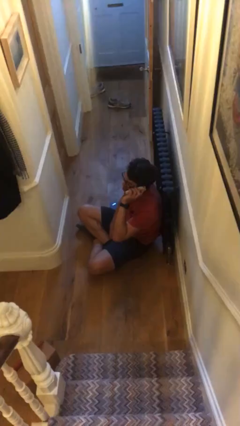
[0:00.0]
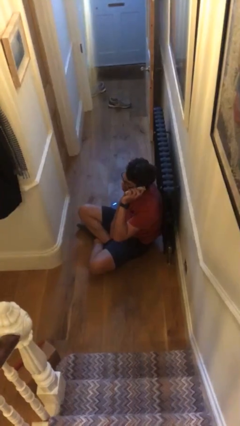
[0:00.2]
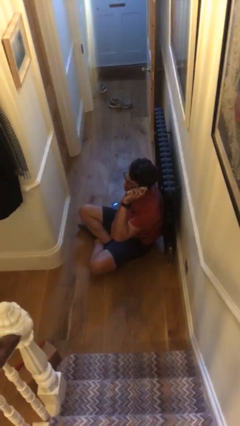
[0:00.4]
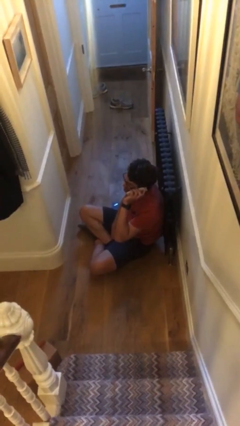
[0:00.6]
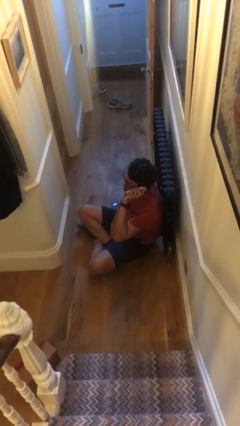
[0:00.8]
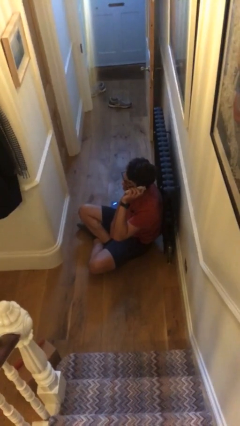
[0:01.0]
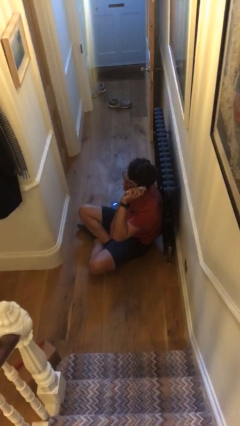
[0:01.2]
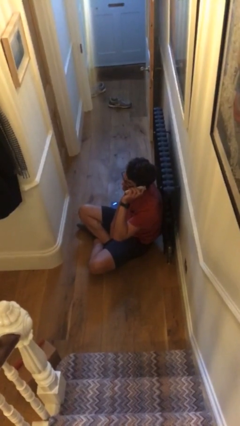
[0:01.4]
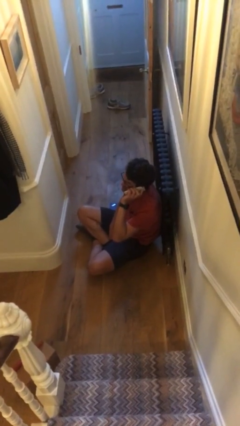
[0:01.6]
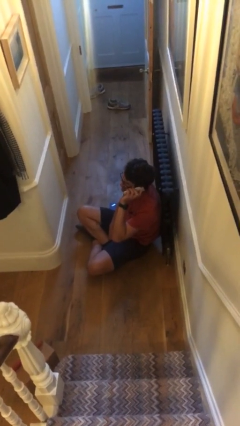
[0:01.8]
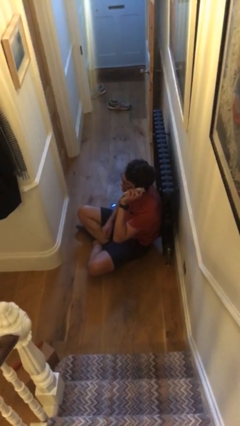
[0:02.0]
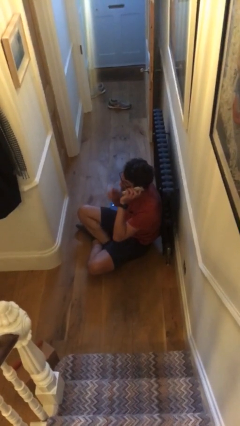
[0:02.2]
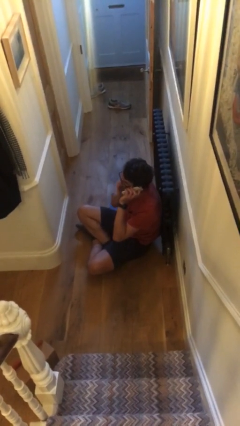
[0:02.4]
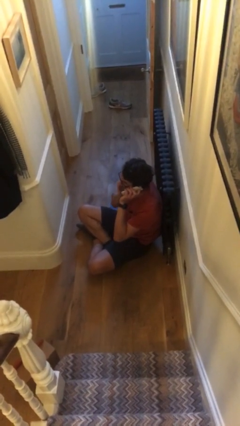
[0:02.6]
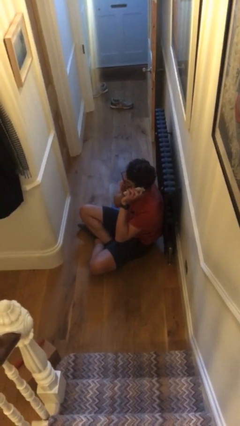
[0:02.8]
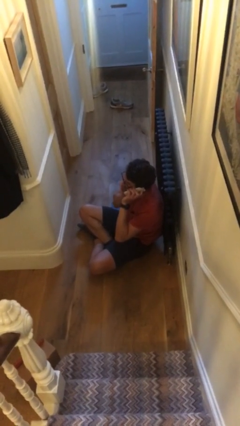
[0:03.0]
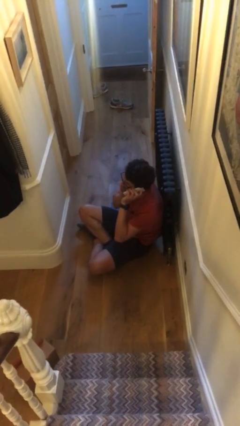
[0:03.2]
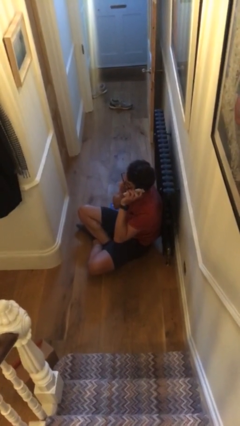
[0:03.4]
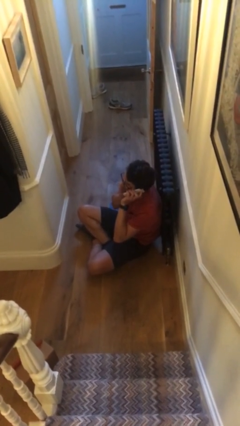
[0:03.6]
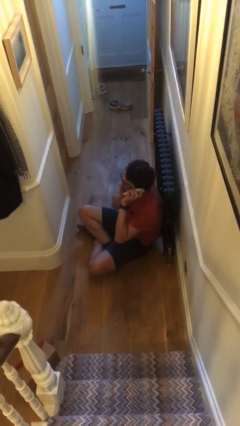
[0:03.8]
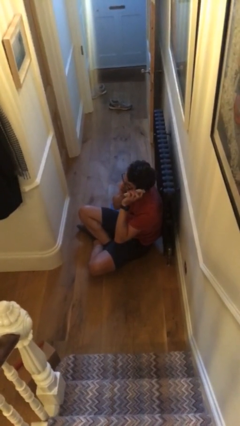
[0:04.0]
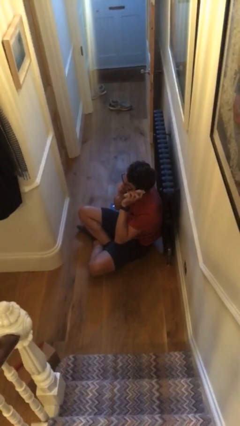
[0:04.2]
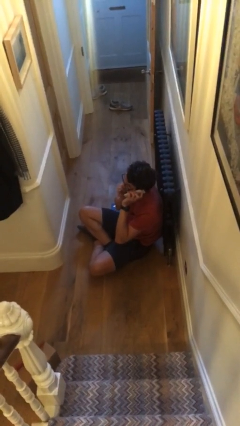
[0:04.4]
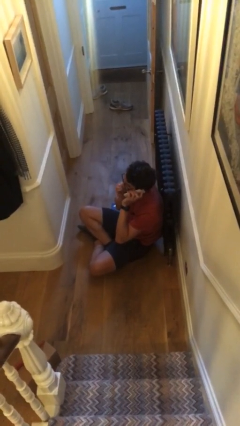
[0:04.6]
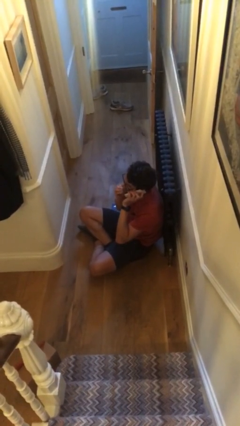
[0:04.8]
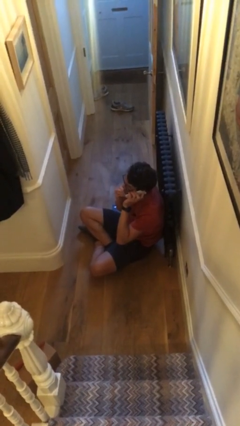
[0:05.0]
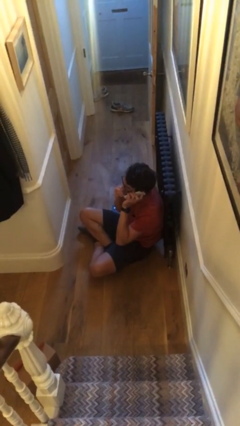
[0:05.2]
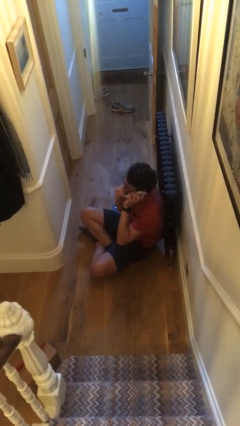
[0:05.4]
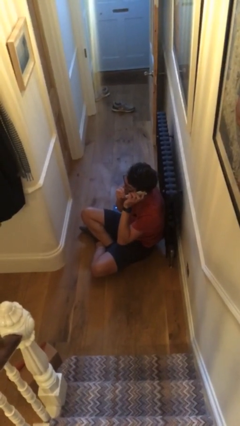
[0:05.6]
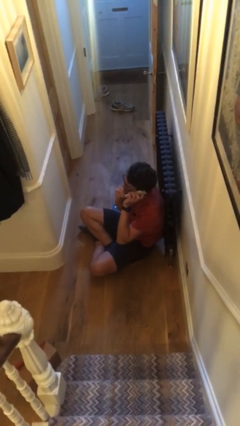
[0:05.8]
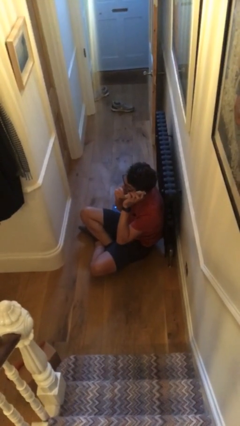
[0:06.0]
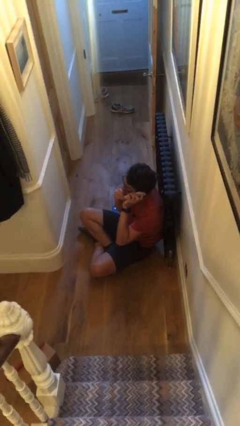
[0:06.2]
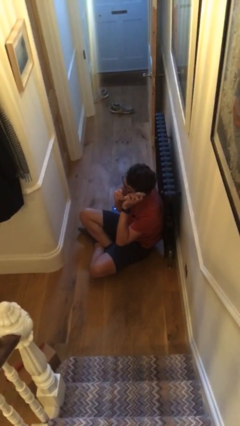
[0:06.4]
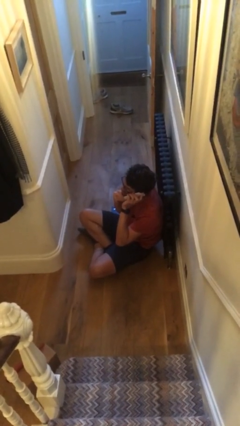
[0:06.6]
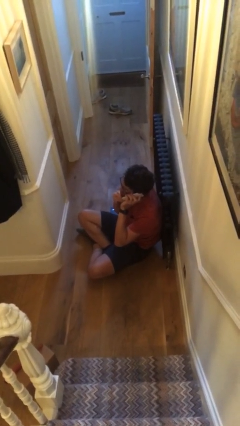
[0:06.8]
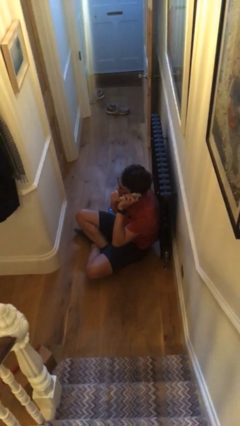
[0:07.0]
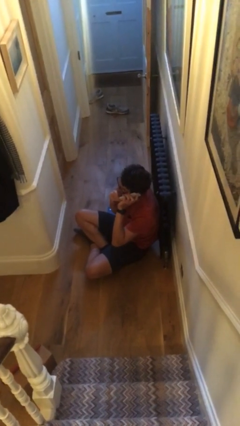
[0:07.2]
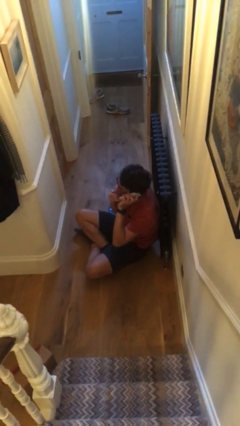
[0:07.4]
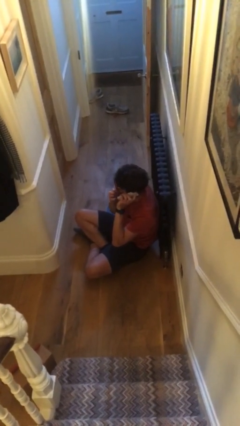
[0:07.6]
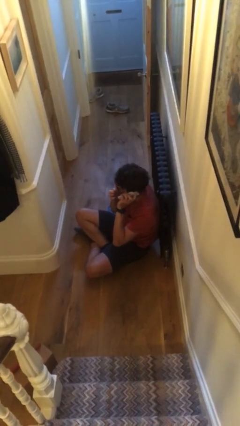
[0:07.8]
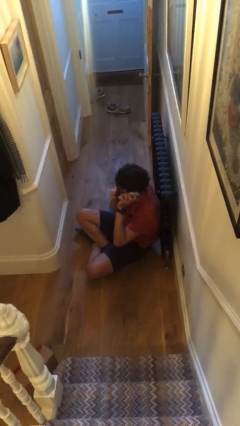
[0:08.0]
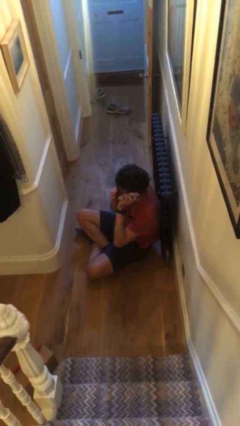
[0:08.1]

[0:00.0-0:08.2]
person talks on phone

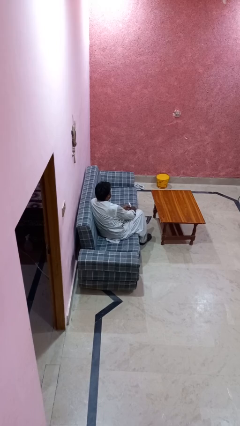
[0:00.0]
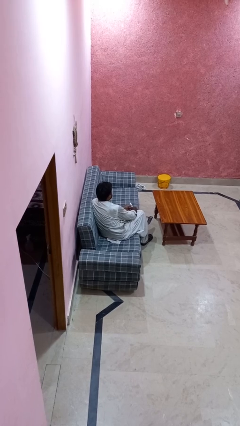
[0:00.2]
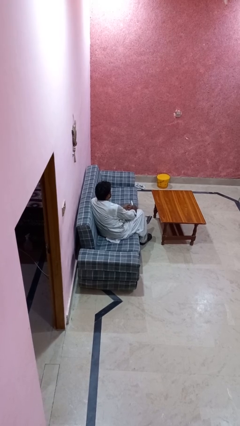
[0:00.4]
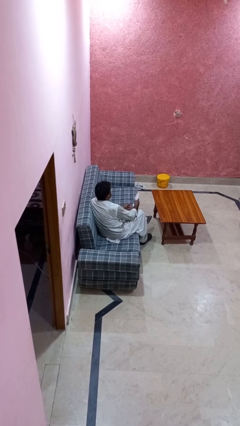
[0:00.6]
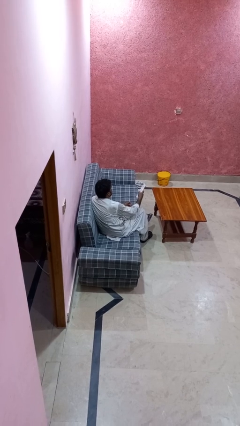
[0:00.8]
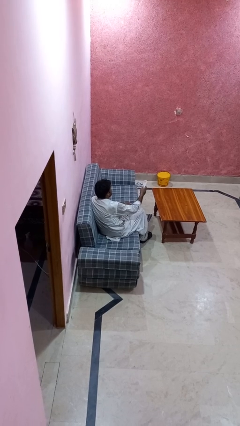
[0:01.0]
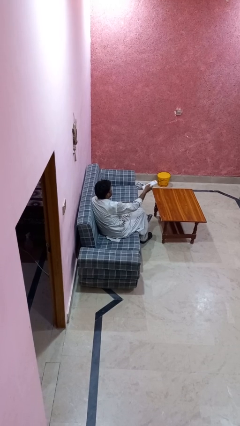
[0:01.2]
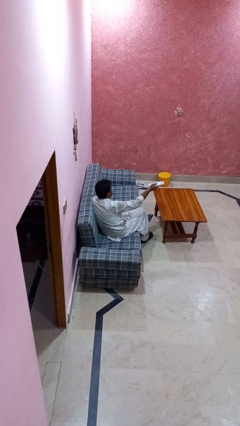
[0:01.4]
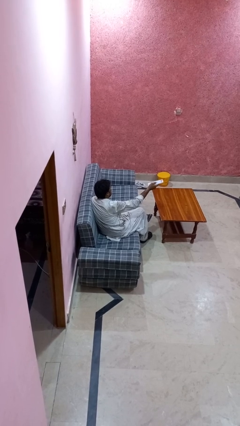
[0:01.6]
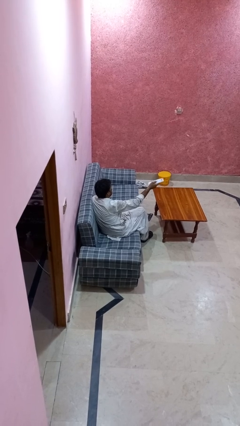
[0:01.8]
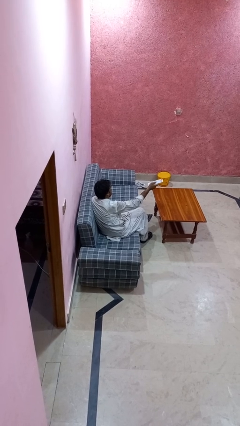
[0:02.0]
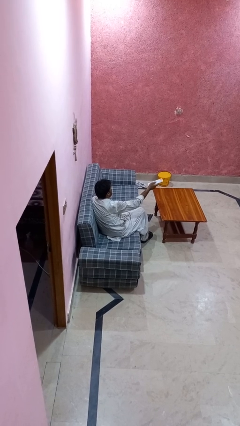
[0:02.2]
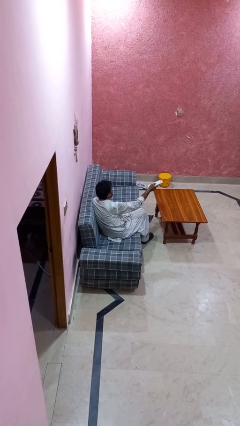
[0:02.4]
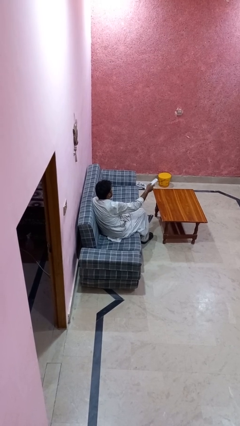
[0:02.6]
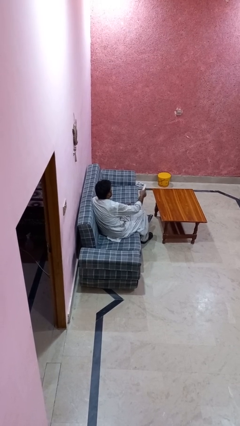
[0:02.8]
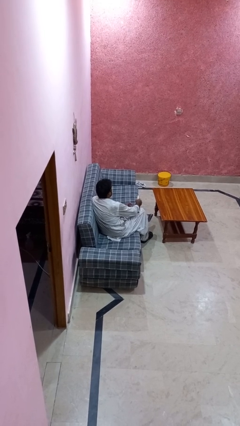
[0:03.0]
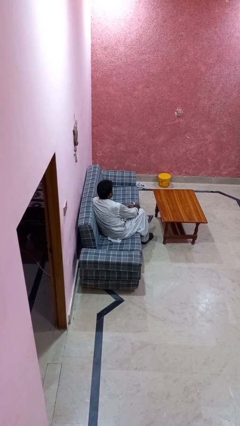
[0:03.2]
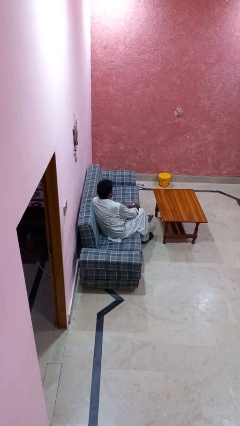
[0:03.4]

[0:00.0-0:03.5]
person uses television remote

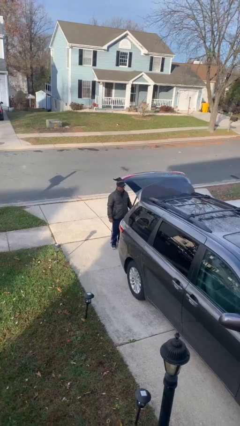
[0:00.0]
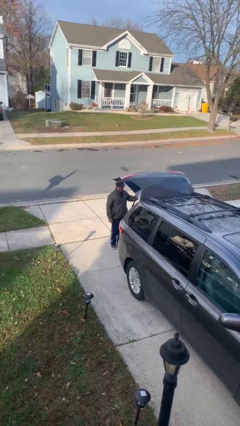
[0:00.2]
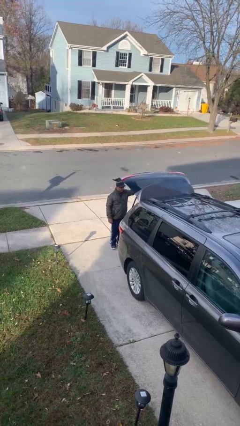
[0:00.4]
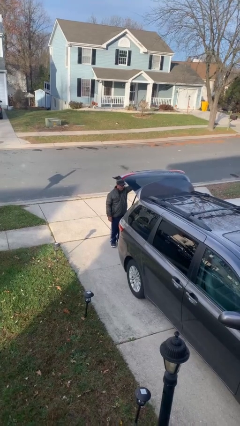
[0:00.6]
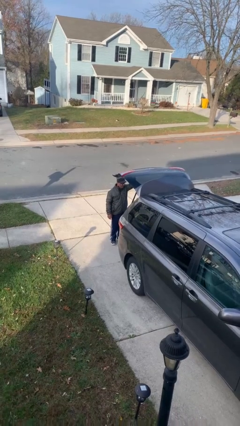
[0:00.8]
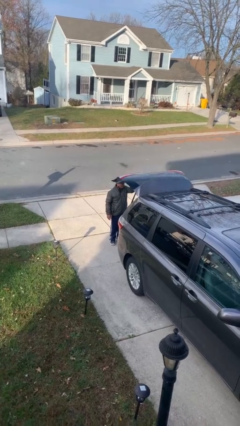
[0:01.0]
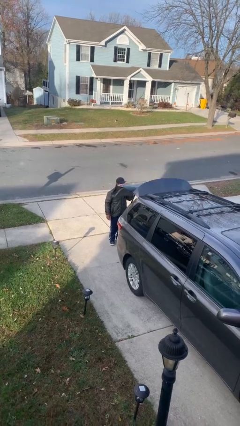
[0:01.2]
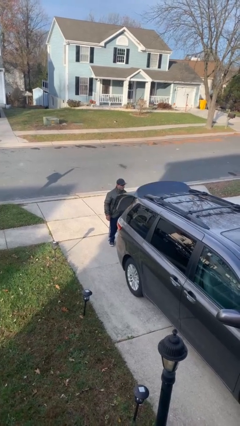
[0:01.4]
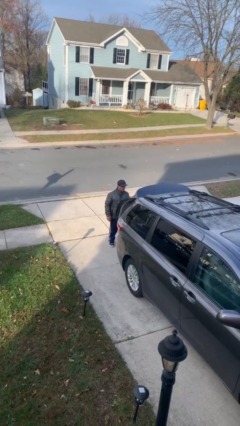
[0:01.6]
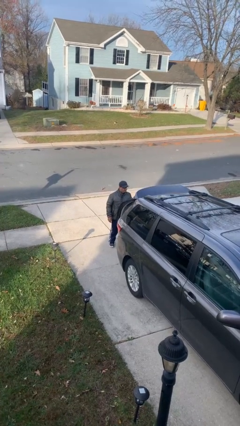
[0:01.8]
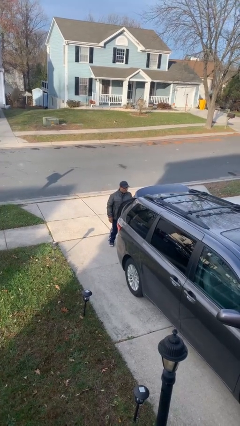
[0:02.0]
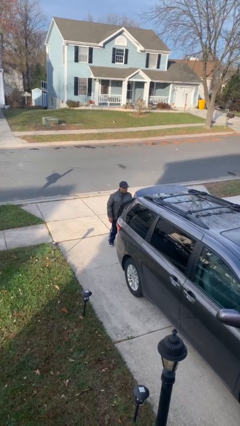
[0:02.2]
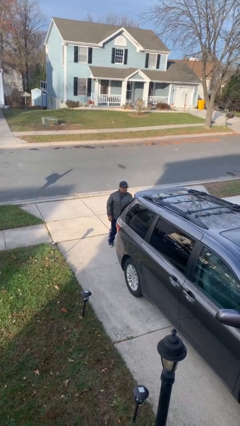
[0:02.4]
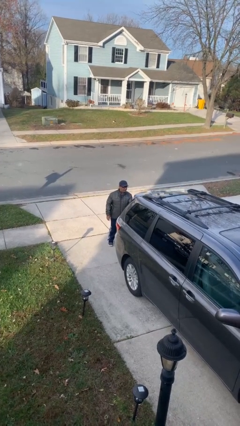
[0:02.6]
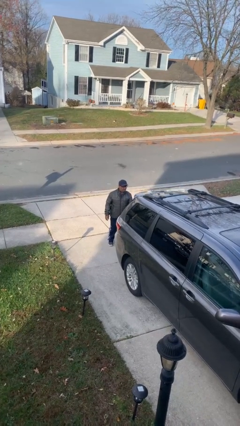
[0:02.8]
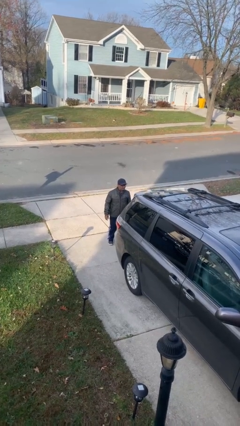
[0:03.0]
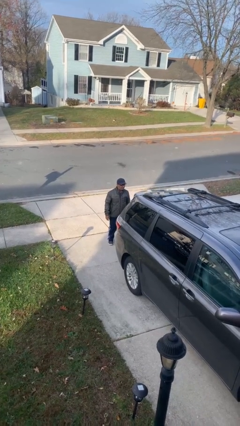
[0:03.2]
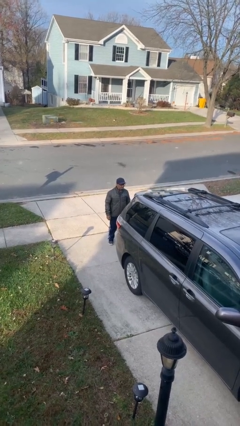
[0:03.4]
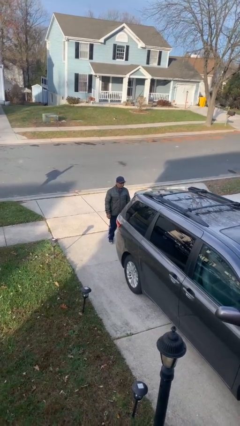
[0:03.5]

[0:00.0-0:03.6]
person closes car trunk

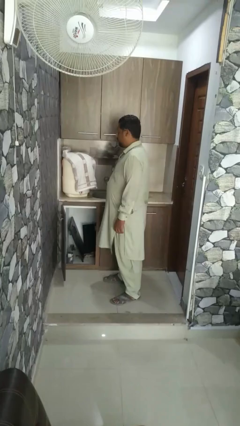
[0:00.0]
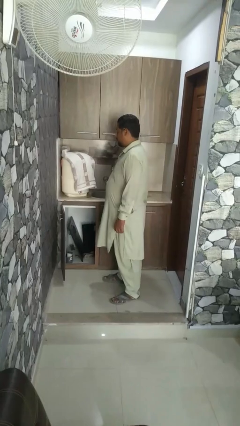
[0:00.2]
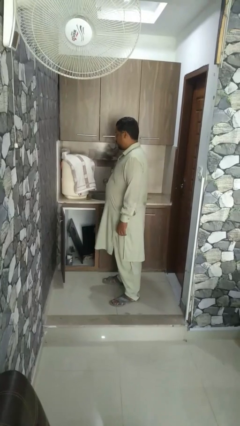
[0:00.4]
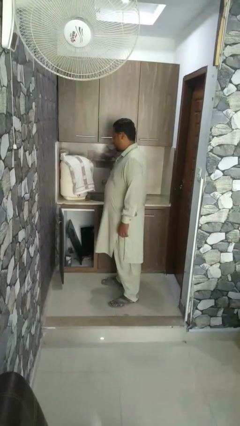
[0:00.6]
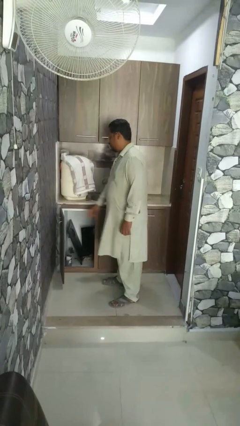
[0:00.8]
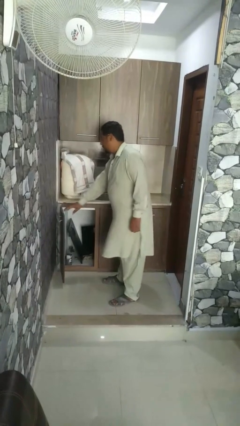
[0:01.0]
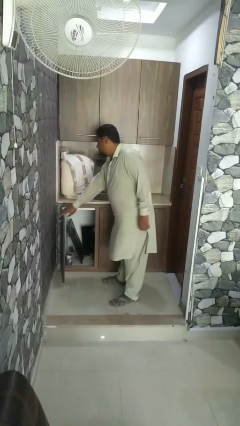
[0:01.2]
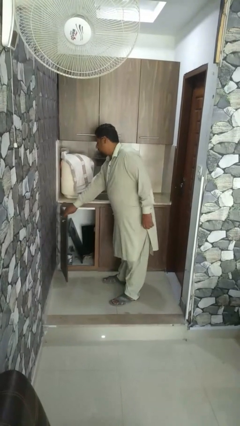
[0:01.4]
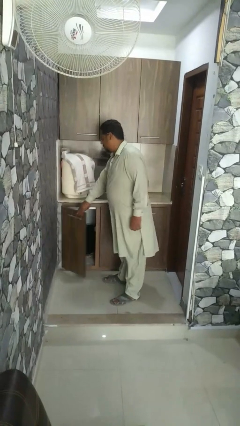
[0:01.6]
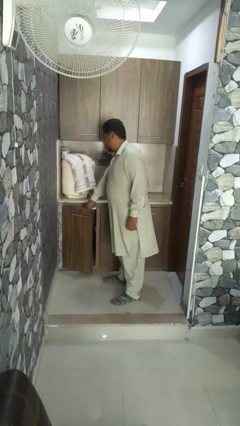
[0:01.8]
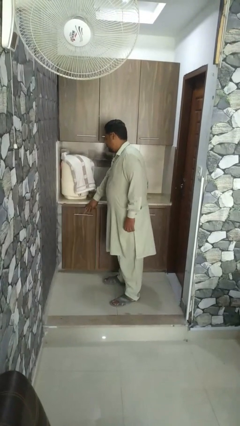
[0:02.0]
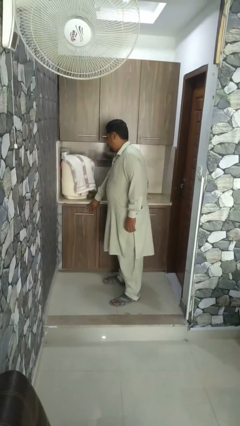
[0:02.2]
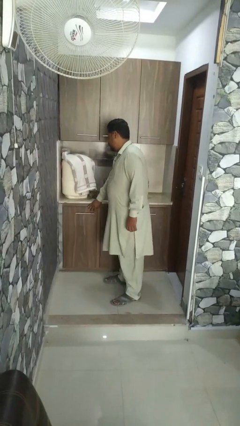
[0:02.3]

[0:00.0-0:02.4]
person closes refrigerator
